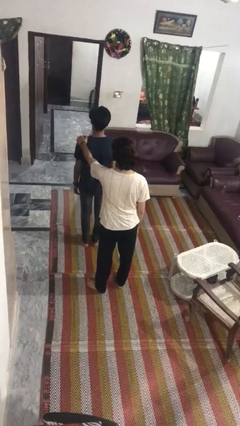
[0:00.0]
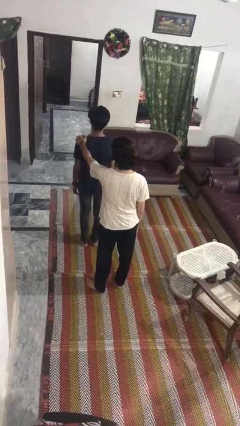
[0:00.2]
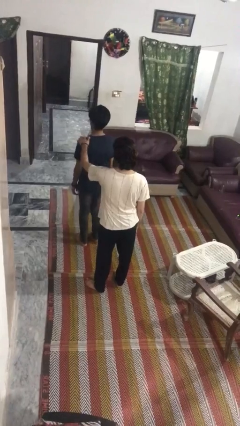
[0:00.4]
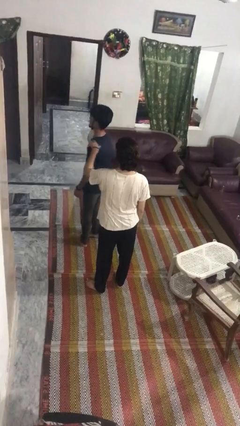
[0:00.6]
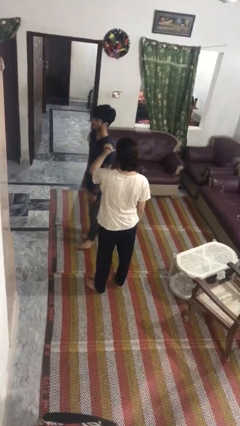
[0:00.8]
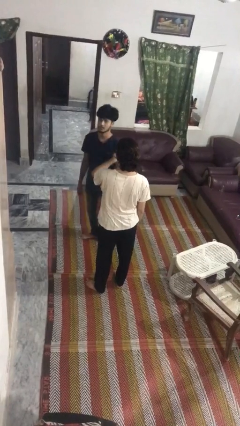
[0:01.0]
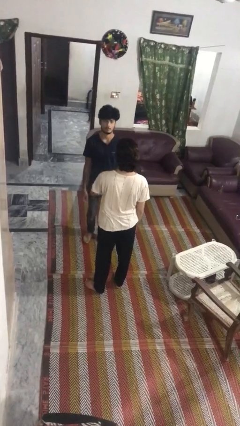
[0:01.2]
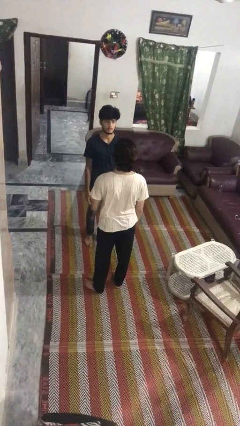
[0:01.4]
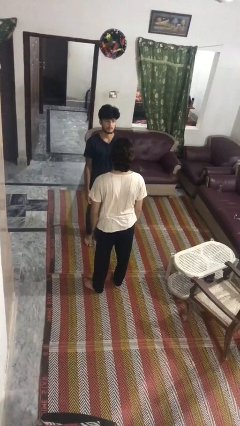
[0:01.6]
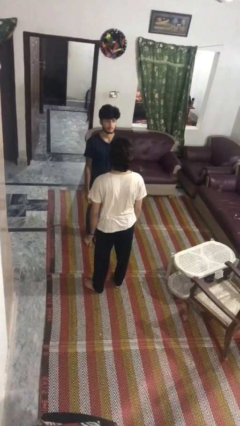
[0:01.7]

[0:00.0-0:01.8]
person spins person around

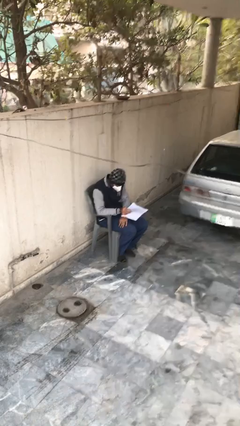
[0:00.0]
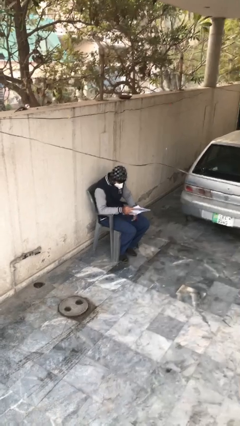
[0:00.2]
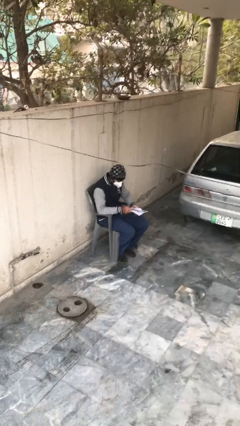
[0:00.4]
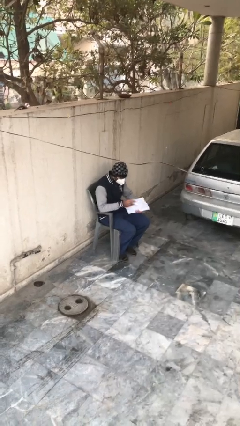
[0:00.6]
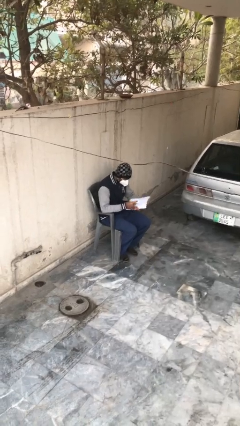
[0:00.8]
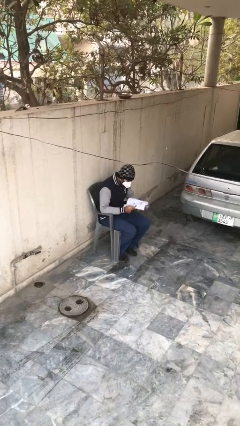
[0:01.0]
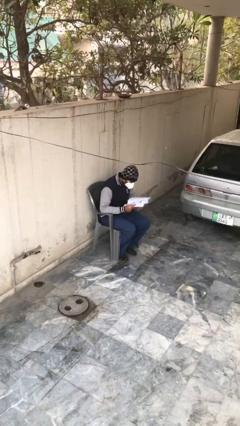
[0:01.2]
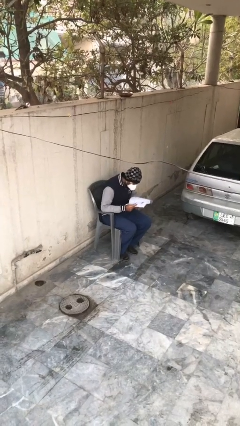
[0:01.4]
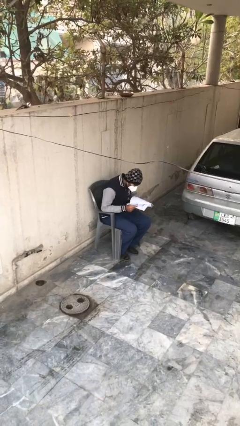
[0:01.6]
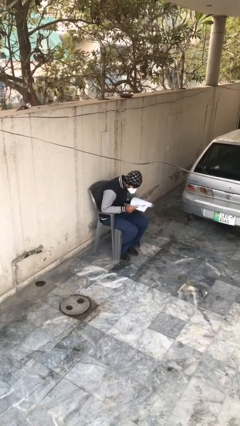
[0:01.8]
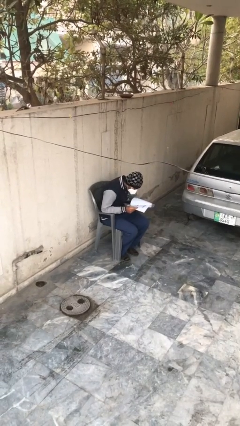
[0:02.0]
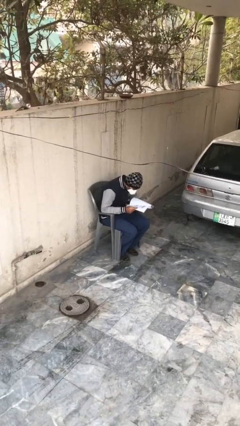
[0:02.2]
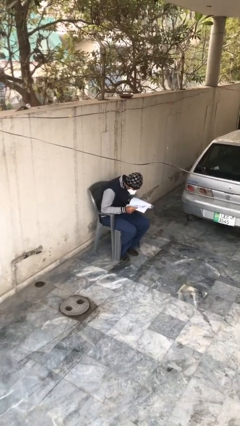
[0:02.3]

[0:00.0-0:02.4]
person reads document

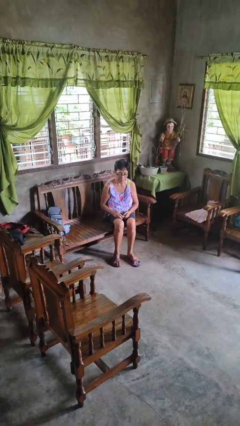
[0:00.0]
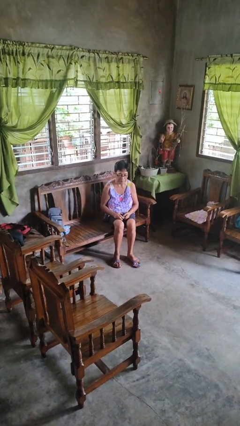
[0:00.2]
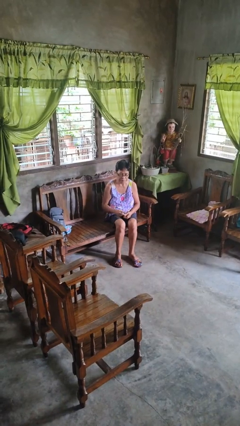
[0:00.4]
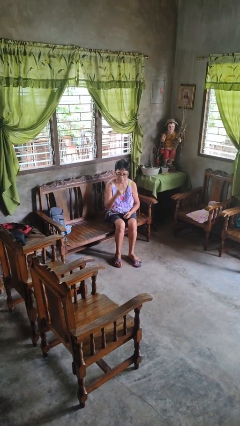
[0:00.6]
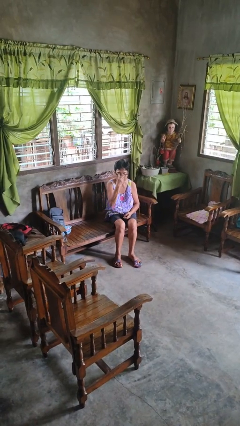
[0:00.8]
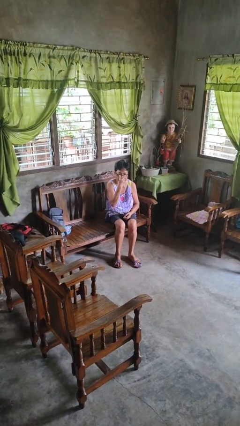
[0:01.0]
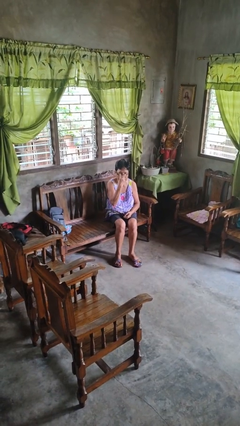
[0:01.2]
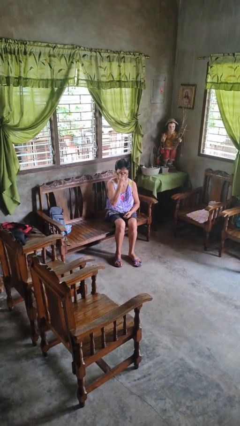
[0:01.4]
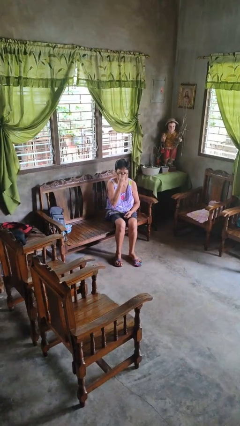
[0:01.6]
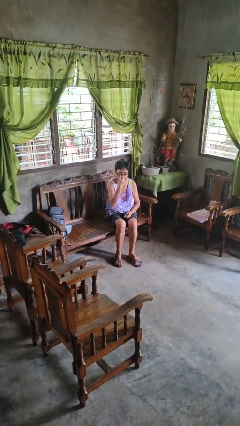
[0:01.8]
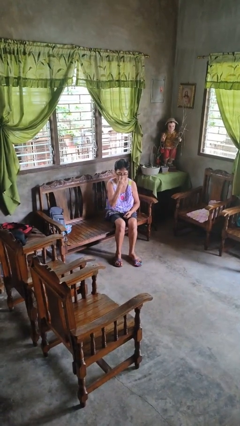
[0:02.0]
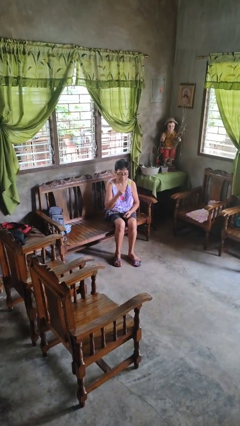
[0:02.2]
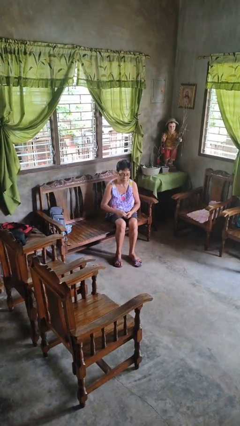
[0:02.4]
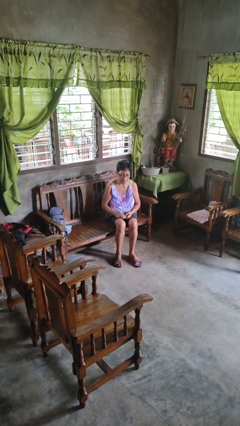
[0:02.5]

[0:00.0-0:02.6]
person gestures watch closely

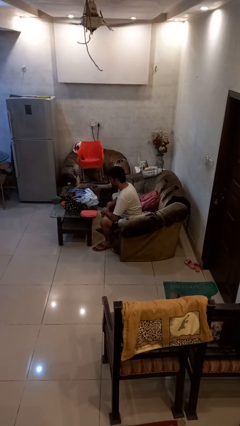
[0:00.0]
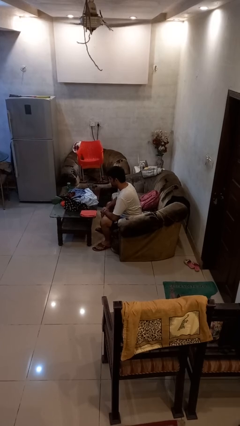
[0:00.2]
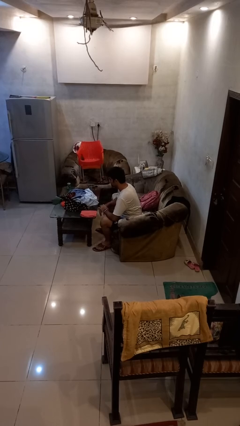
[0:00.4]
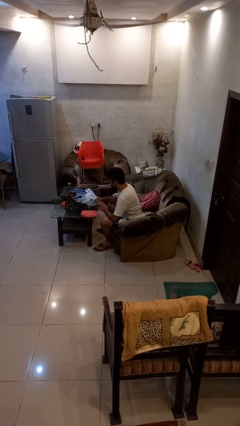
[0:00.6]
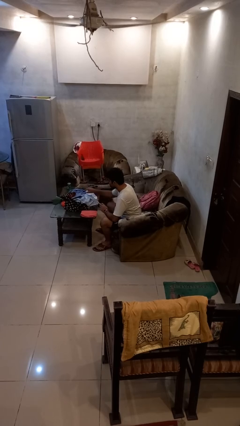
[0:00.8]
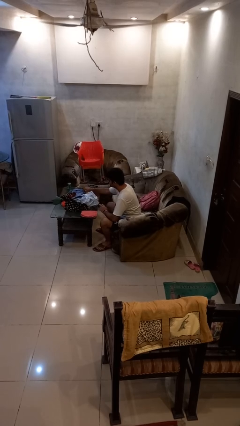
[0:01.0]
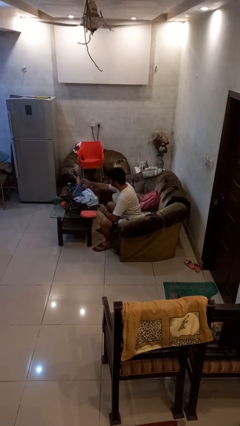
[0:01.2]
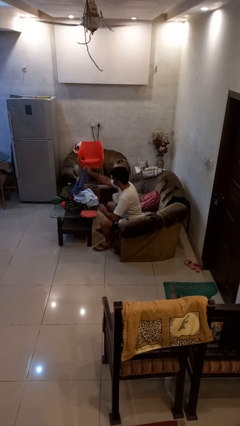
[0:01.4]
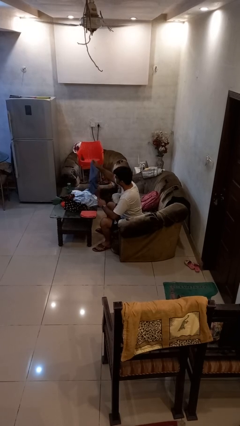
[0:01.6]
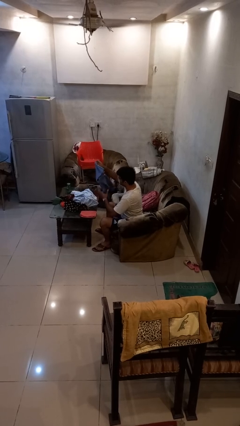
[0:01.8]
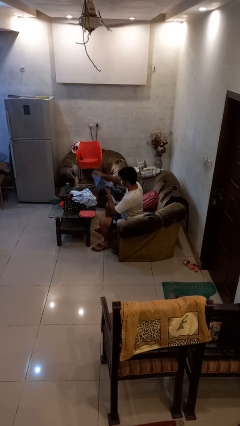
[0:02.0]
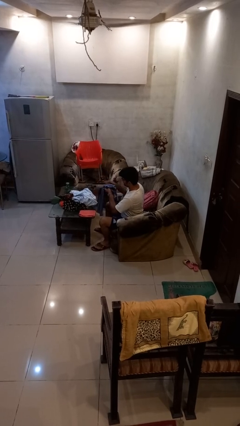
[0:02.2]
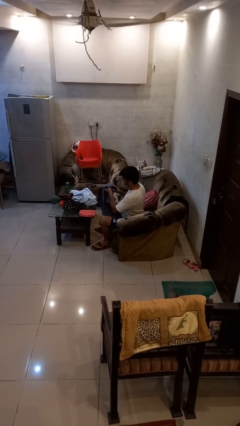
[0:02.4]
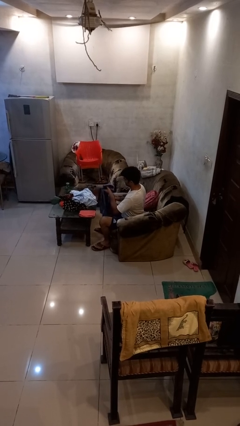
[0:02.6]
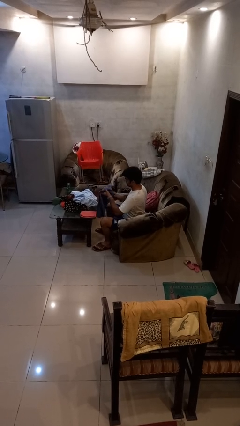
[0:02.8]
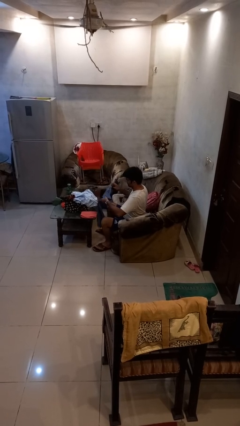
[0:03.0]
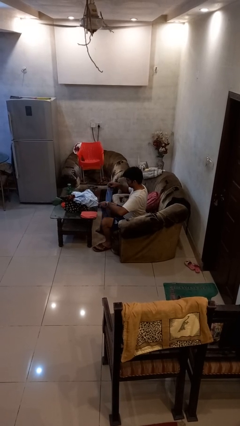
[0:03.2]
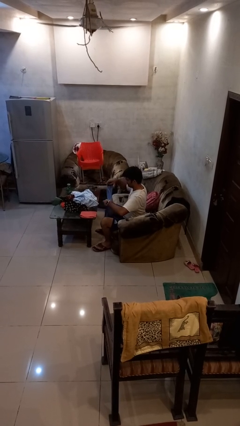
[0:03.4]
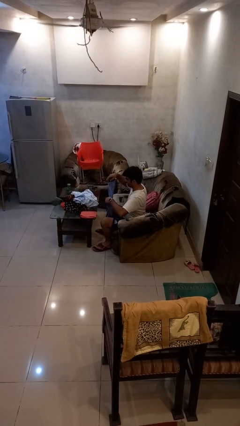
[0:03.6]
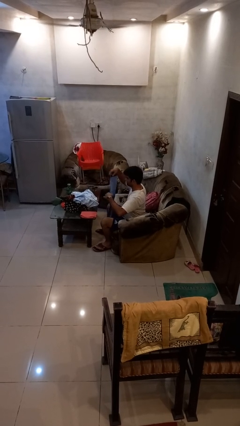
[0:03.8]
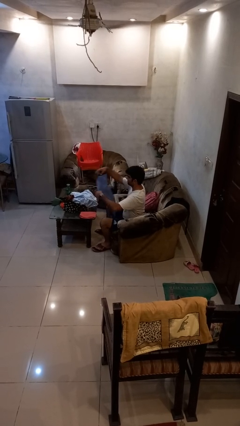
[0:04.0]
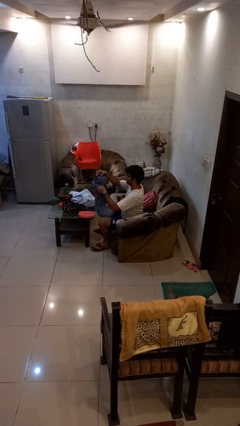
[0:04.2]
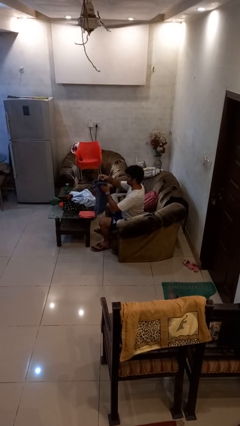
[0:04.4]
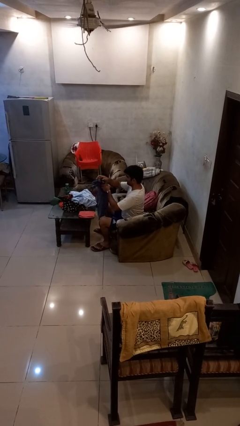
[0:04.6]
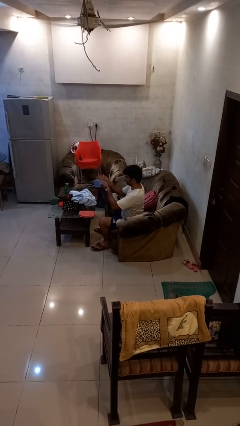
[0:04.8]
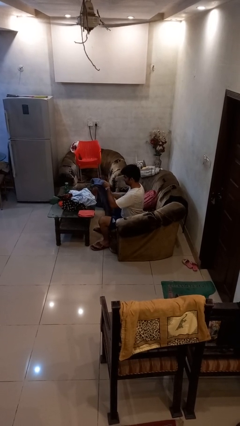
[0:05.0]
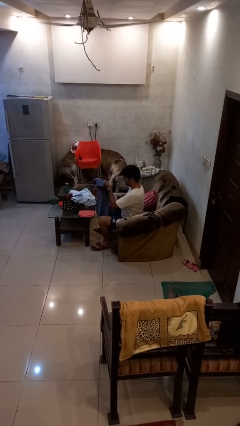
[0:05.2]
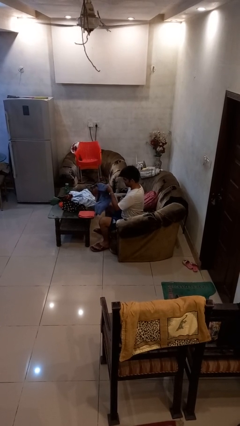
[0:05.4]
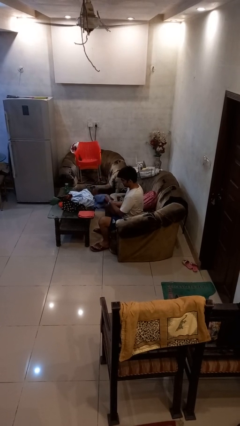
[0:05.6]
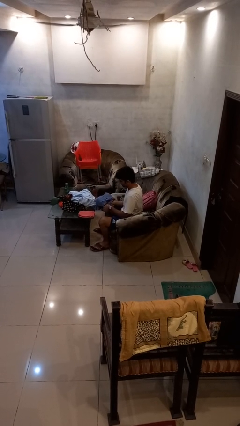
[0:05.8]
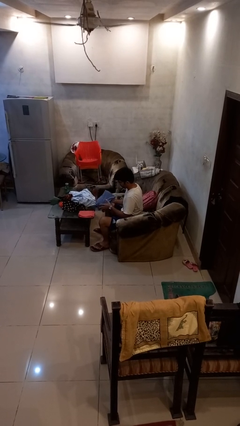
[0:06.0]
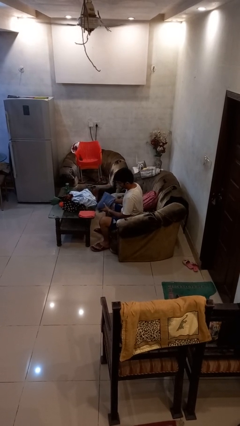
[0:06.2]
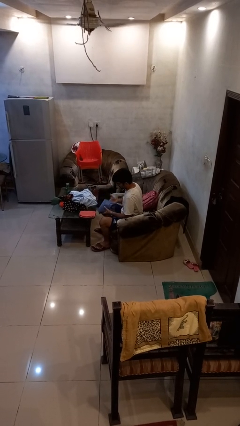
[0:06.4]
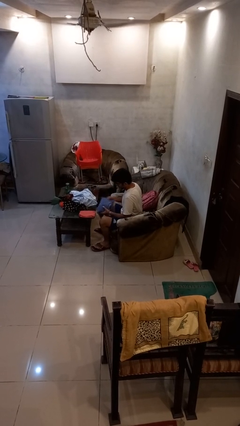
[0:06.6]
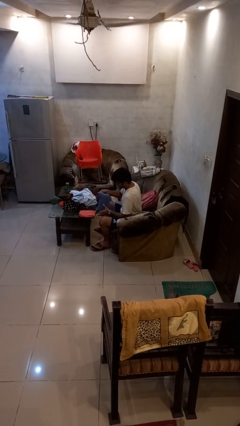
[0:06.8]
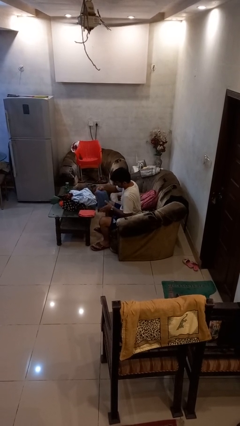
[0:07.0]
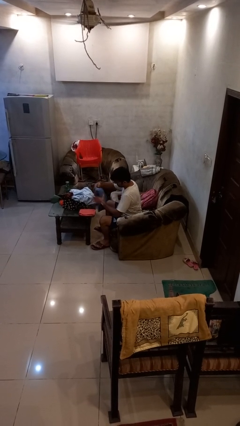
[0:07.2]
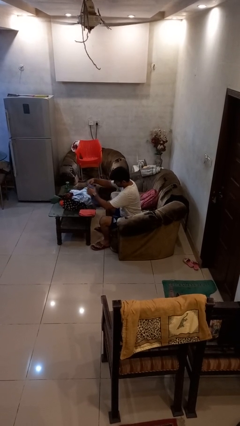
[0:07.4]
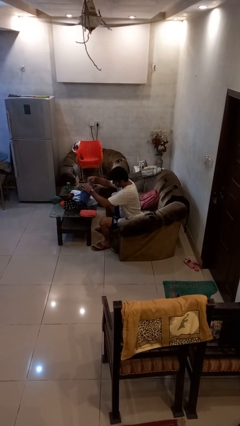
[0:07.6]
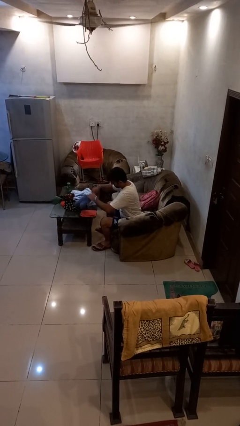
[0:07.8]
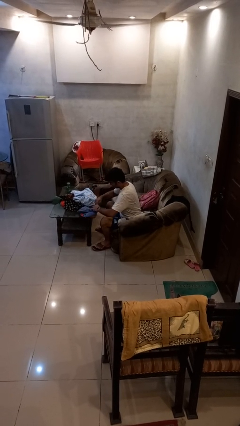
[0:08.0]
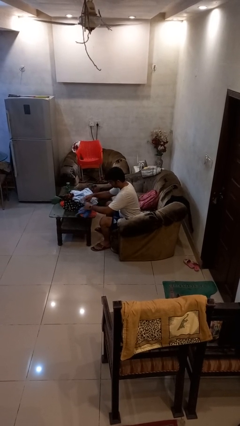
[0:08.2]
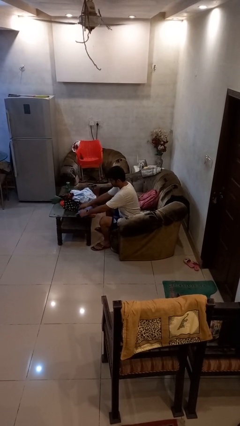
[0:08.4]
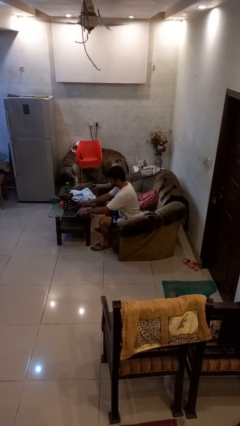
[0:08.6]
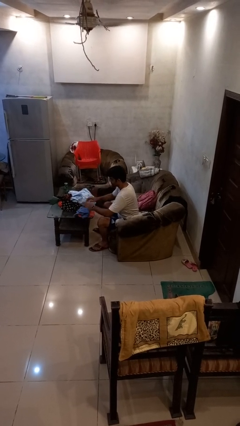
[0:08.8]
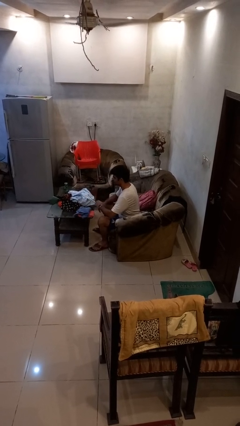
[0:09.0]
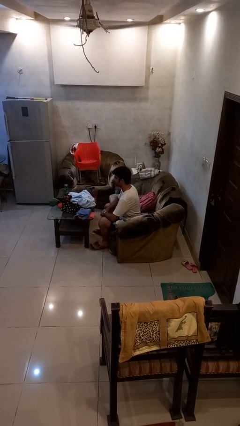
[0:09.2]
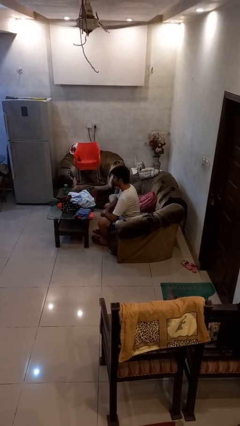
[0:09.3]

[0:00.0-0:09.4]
person folds shirt

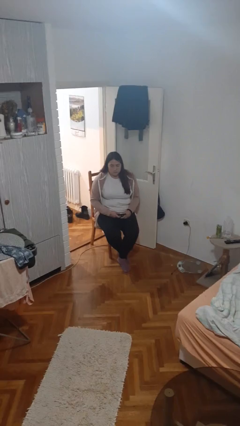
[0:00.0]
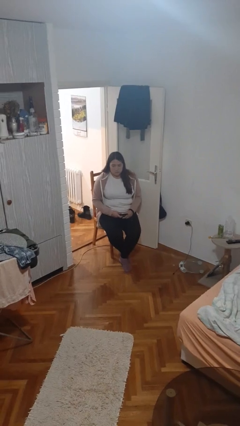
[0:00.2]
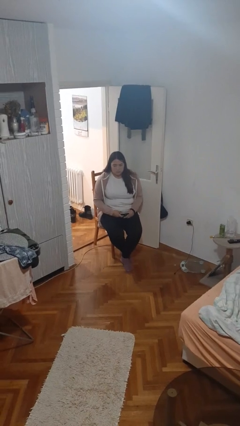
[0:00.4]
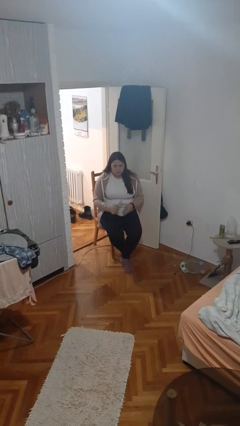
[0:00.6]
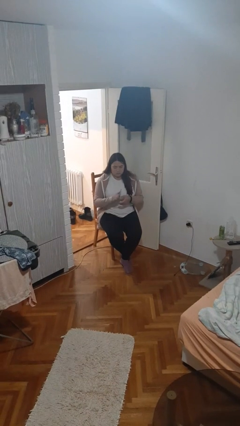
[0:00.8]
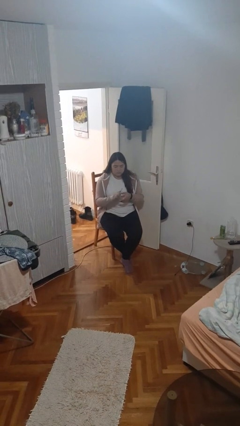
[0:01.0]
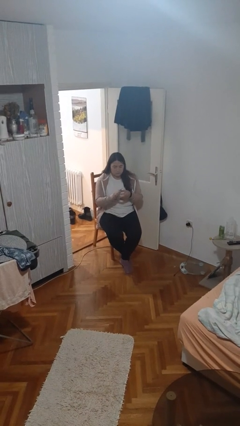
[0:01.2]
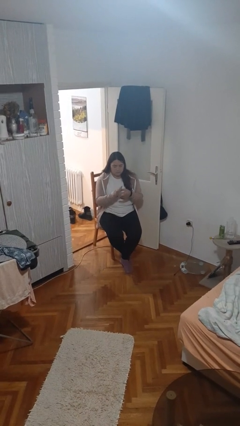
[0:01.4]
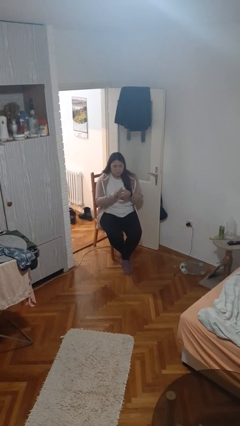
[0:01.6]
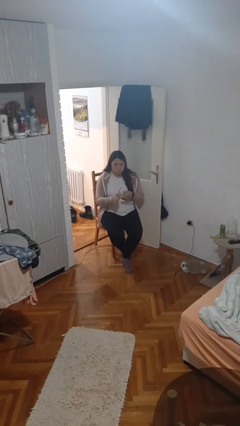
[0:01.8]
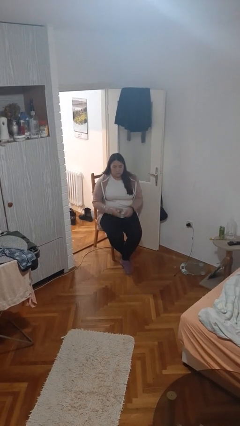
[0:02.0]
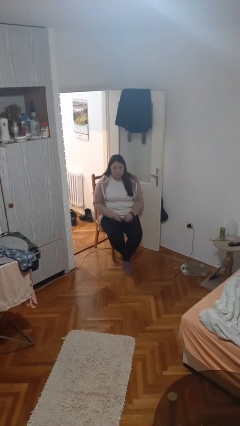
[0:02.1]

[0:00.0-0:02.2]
person files fingernails
